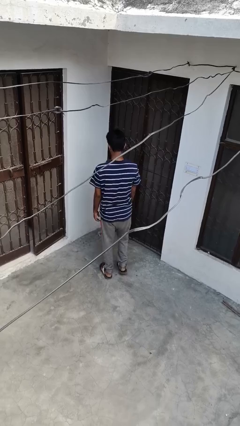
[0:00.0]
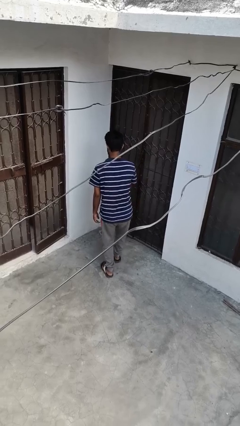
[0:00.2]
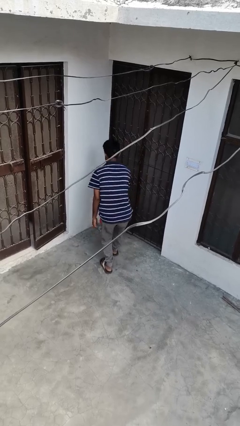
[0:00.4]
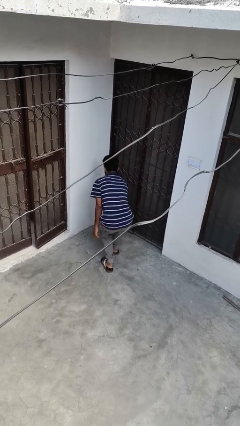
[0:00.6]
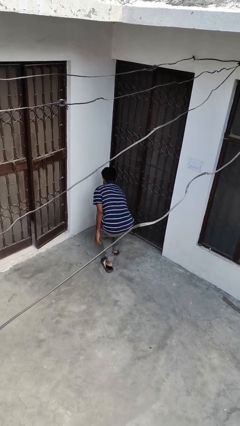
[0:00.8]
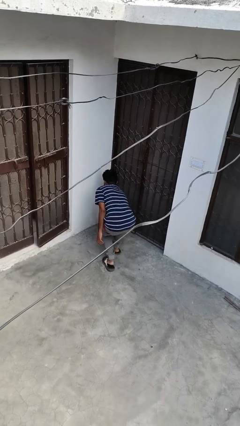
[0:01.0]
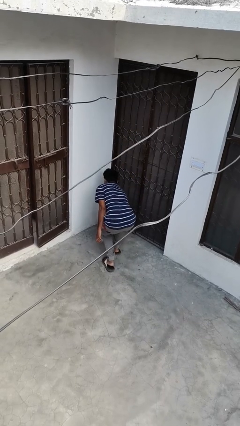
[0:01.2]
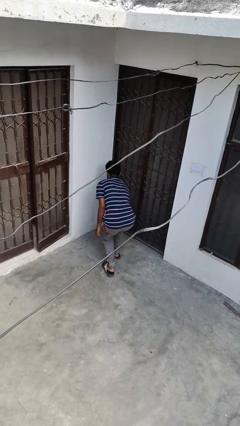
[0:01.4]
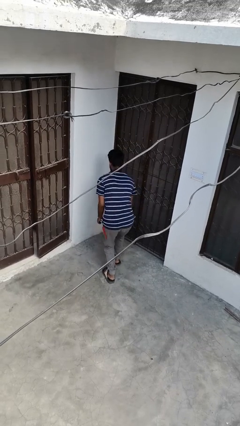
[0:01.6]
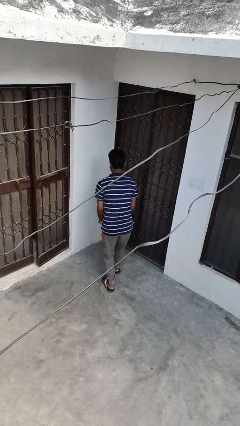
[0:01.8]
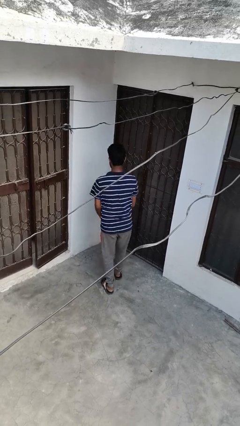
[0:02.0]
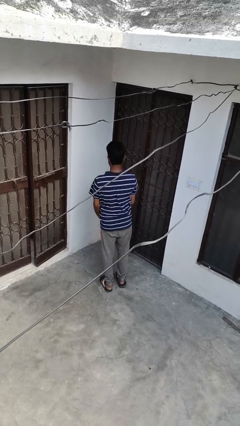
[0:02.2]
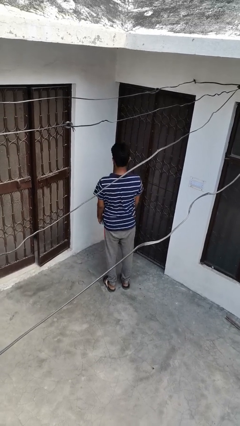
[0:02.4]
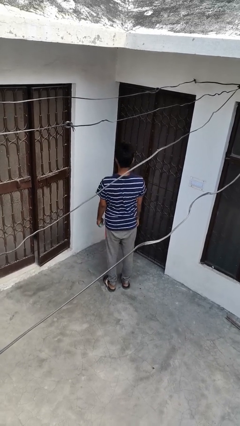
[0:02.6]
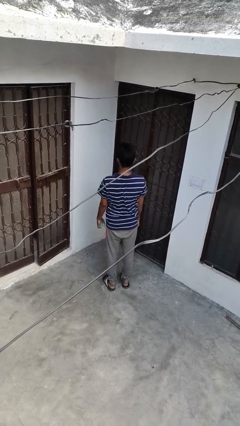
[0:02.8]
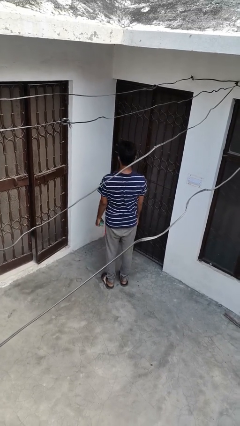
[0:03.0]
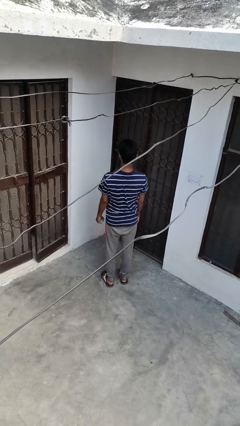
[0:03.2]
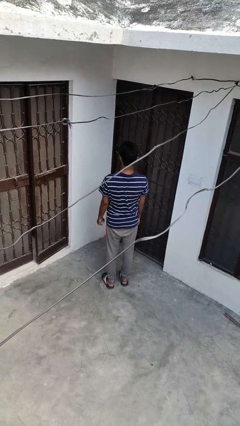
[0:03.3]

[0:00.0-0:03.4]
person picks up object from floor

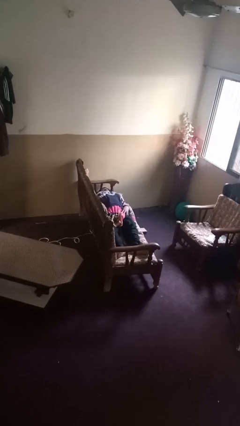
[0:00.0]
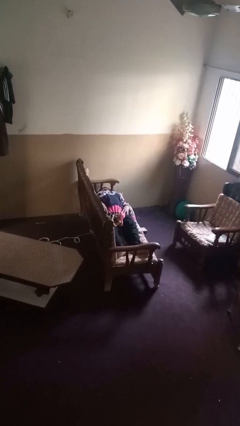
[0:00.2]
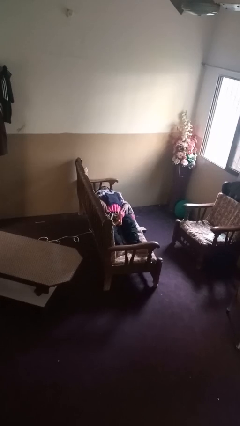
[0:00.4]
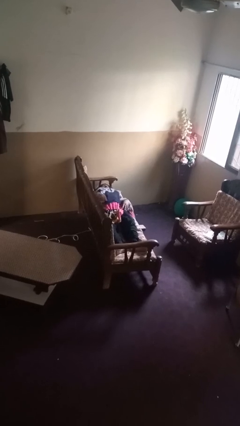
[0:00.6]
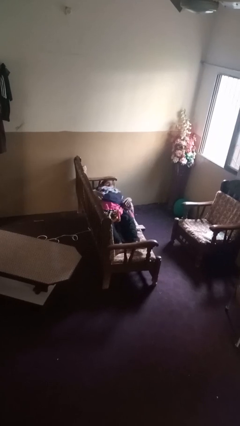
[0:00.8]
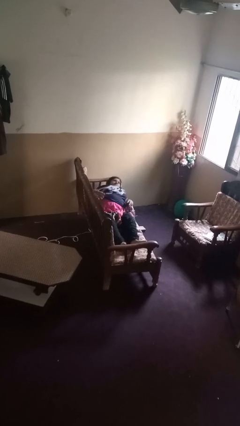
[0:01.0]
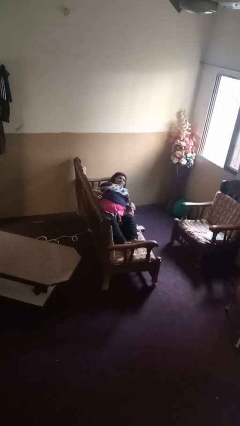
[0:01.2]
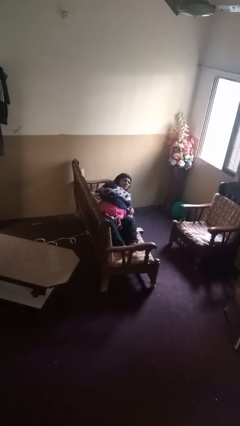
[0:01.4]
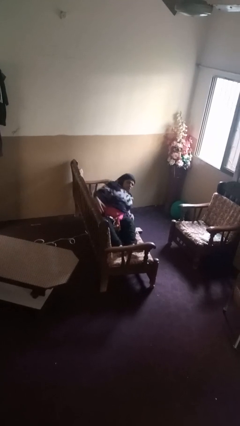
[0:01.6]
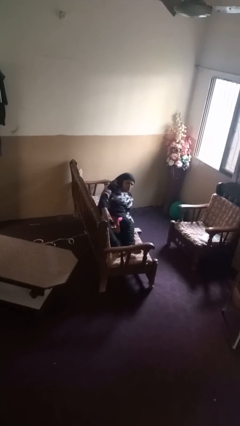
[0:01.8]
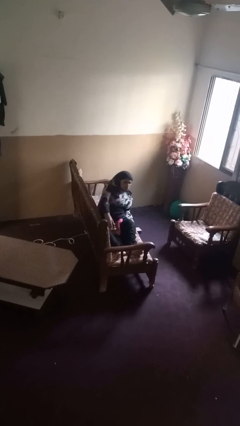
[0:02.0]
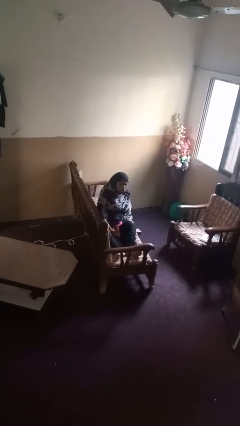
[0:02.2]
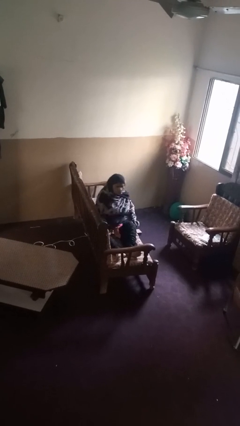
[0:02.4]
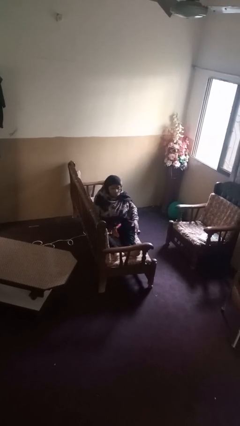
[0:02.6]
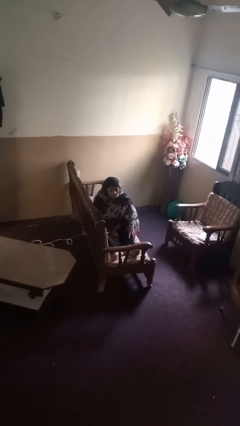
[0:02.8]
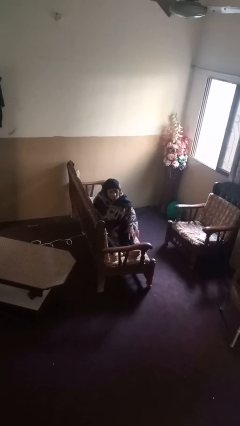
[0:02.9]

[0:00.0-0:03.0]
person stands up

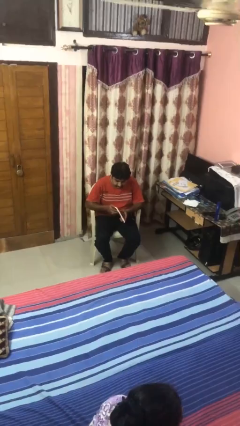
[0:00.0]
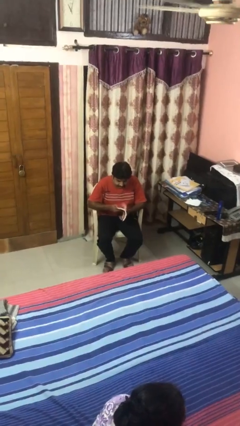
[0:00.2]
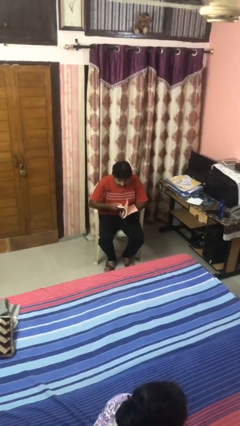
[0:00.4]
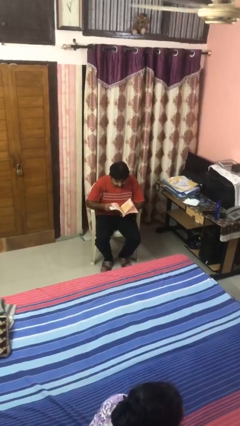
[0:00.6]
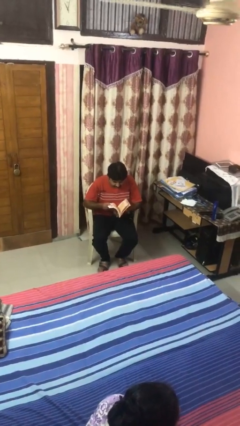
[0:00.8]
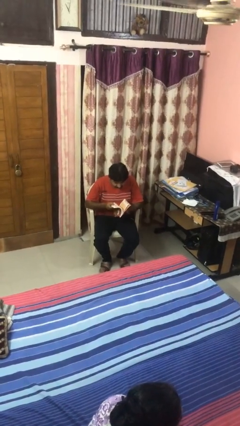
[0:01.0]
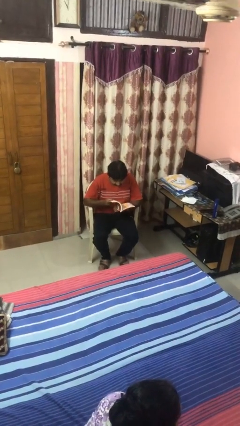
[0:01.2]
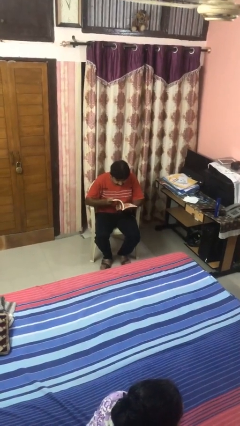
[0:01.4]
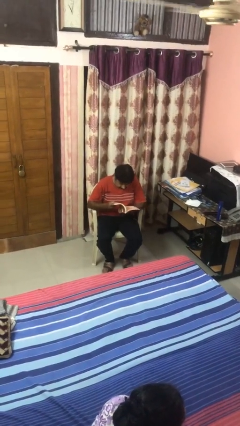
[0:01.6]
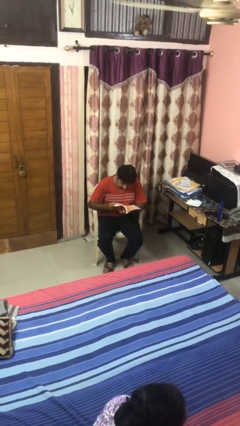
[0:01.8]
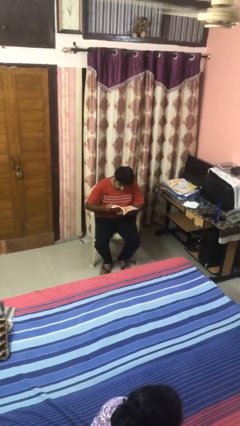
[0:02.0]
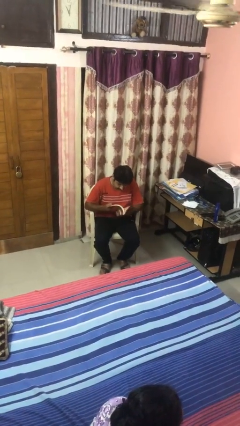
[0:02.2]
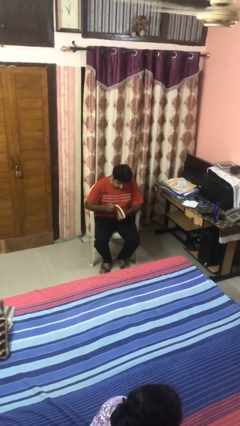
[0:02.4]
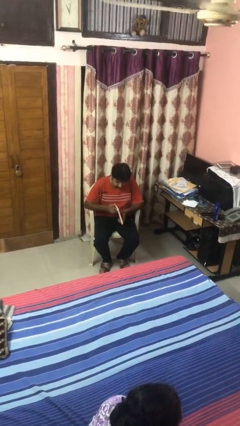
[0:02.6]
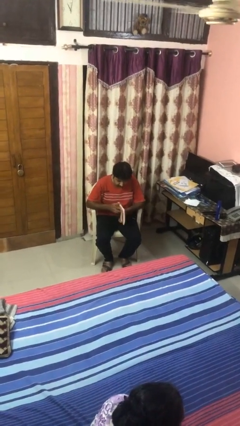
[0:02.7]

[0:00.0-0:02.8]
person reads book

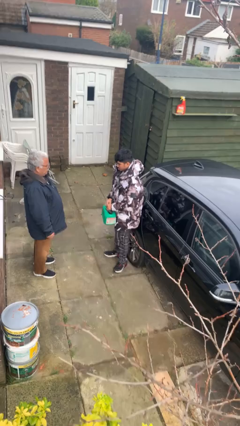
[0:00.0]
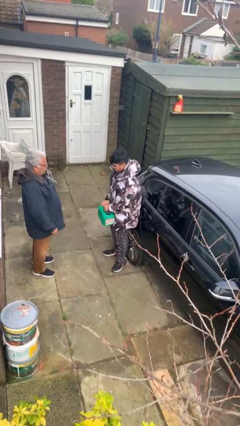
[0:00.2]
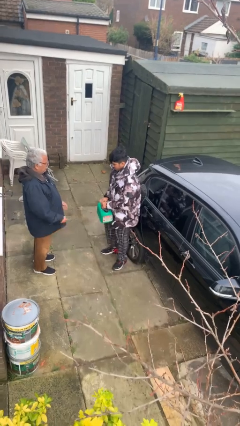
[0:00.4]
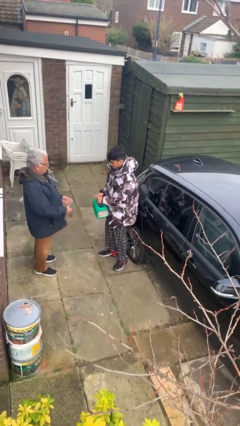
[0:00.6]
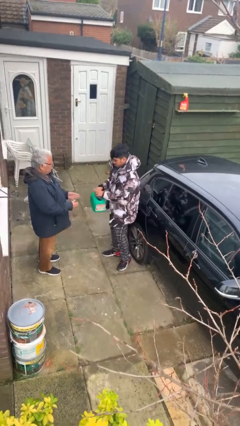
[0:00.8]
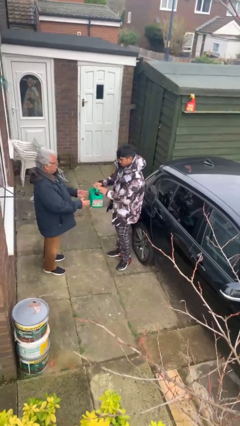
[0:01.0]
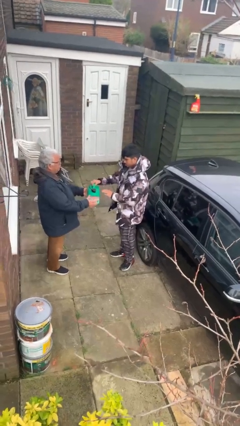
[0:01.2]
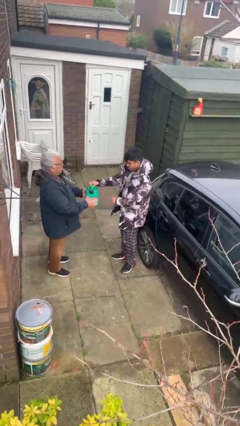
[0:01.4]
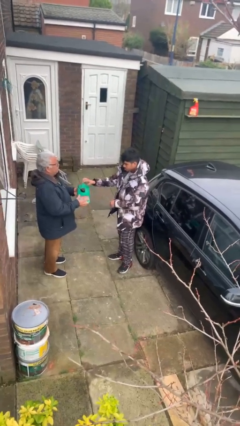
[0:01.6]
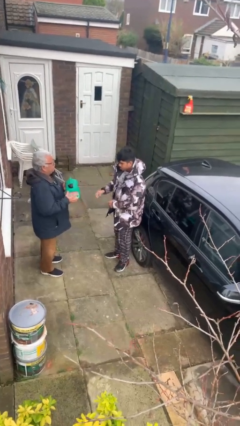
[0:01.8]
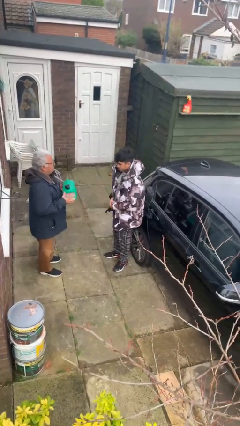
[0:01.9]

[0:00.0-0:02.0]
person transfers object to person

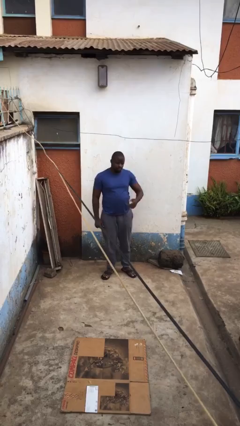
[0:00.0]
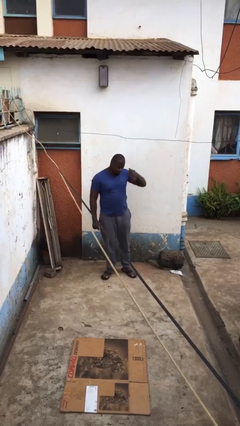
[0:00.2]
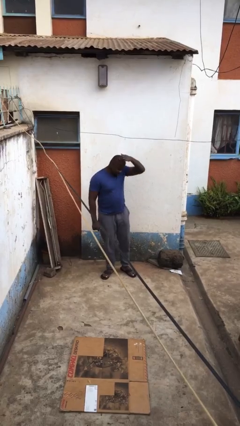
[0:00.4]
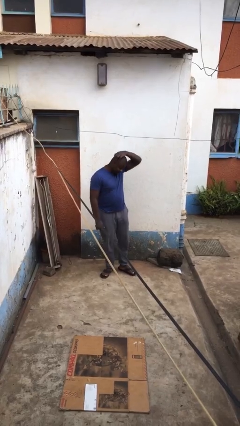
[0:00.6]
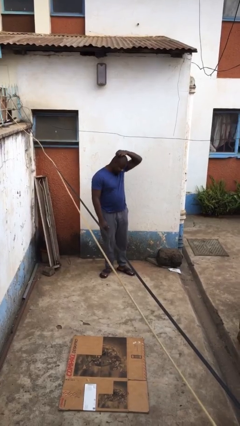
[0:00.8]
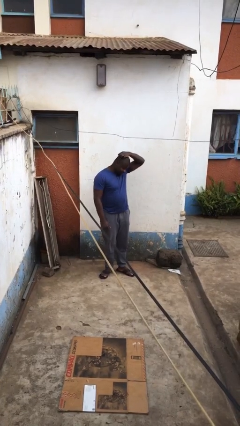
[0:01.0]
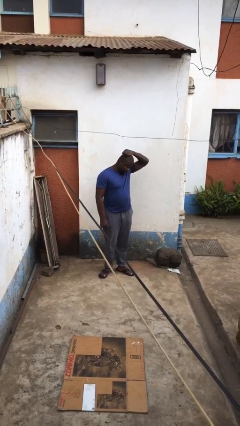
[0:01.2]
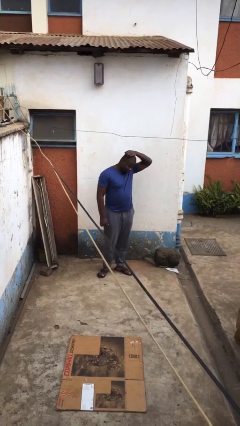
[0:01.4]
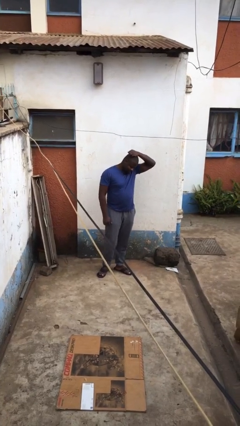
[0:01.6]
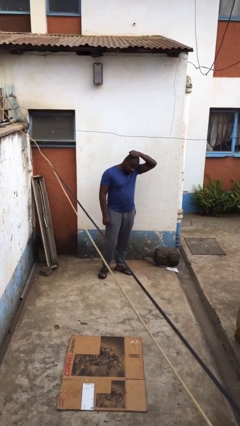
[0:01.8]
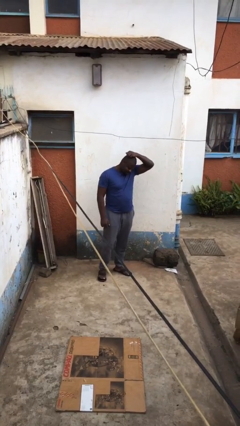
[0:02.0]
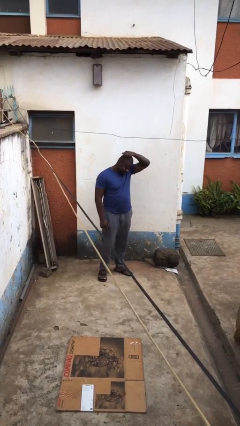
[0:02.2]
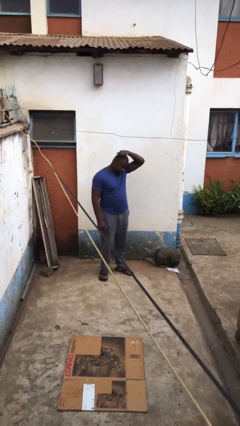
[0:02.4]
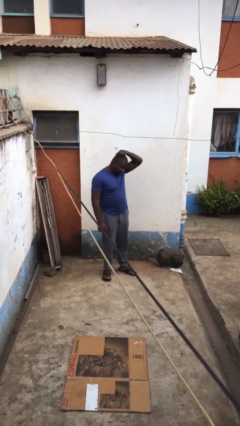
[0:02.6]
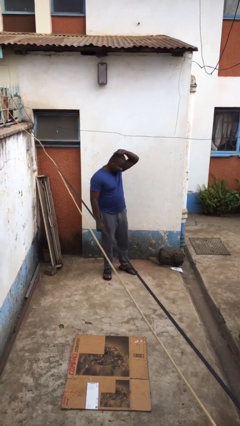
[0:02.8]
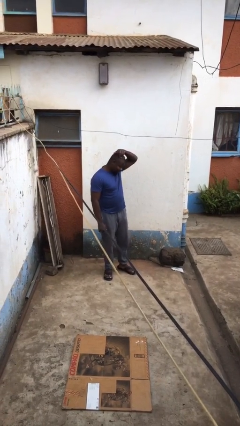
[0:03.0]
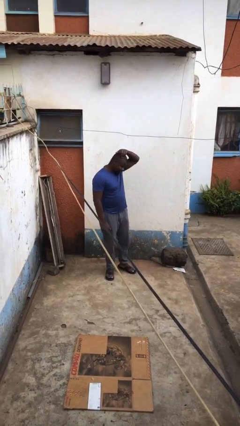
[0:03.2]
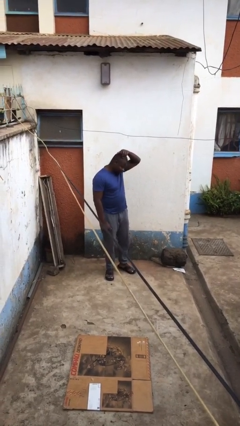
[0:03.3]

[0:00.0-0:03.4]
person scratches face

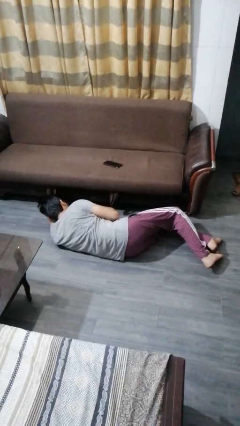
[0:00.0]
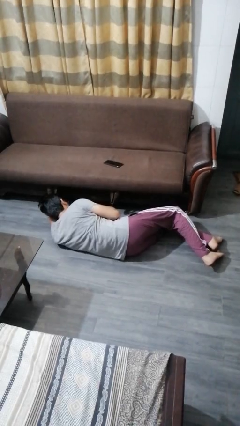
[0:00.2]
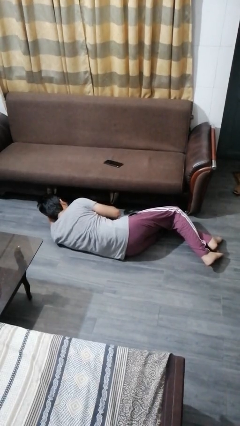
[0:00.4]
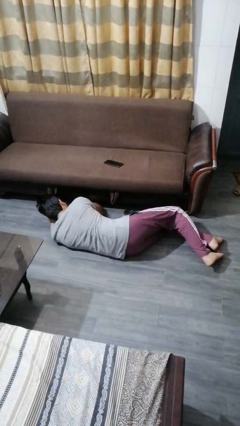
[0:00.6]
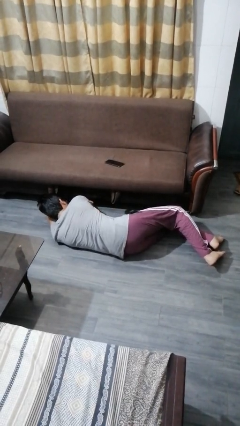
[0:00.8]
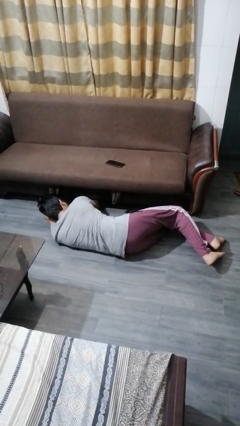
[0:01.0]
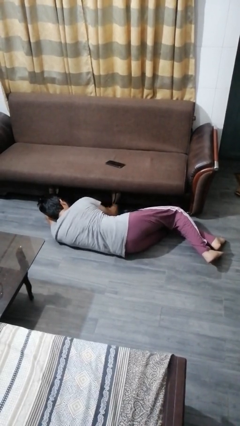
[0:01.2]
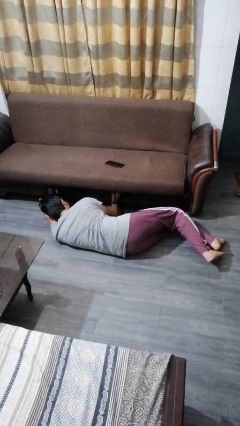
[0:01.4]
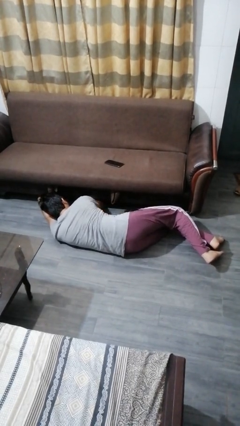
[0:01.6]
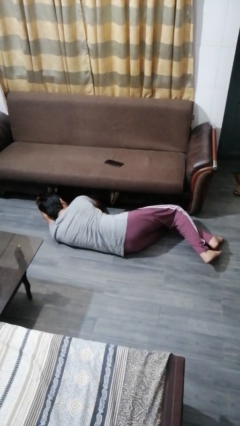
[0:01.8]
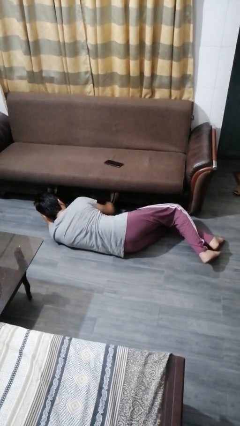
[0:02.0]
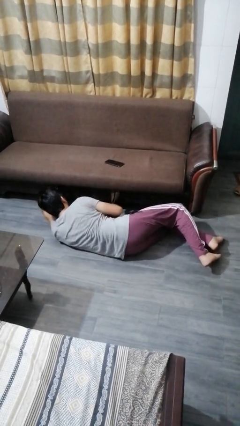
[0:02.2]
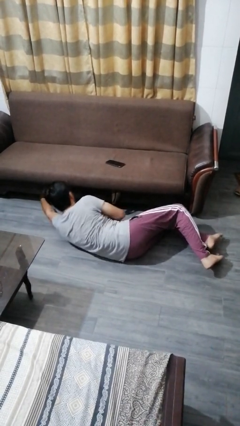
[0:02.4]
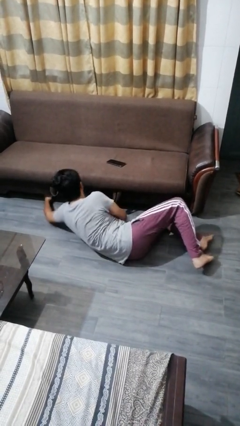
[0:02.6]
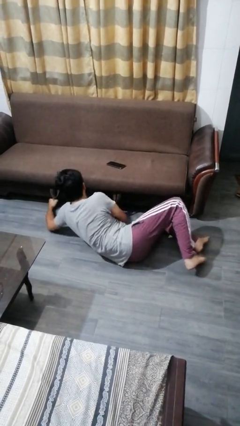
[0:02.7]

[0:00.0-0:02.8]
person searches under couch

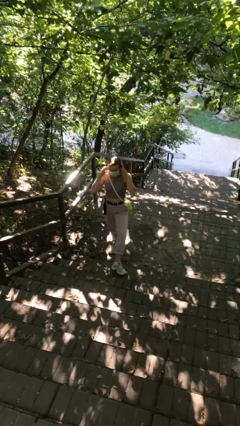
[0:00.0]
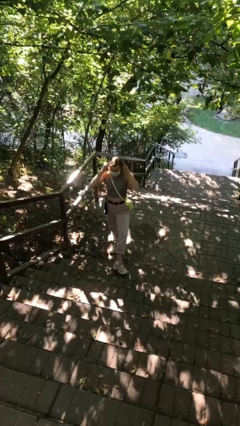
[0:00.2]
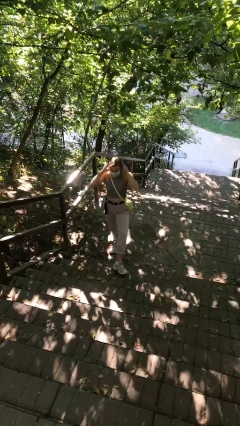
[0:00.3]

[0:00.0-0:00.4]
person puts on facemask
